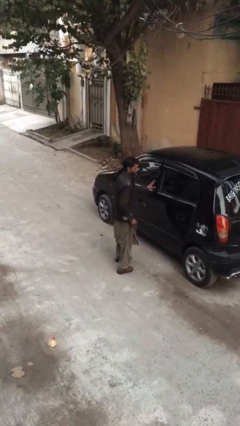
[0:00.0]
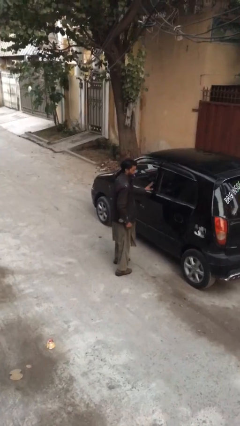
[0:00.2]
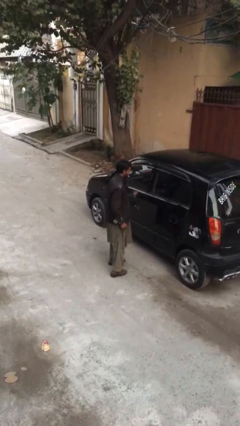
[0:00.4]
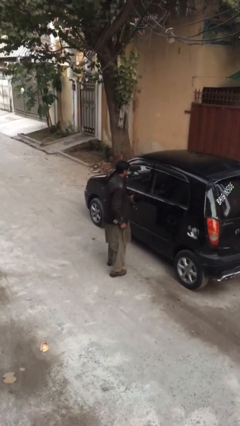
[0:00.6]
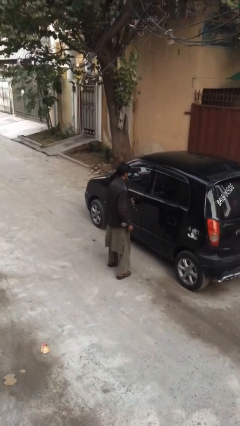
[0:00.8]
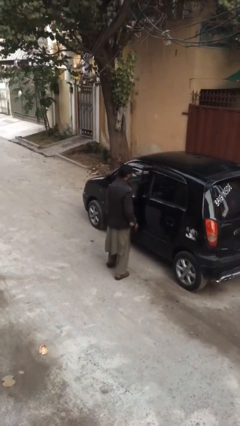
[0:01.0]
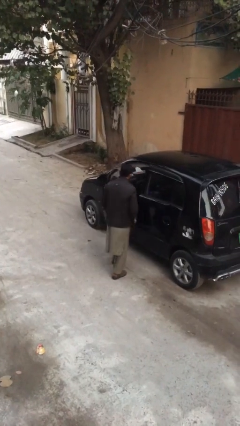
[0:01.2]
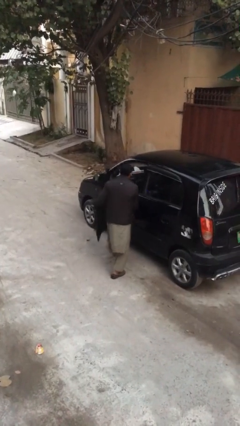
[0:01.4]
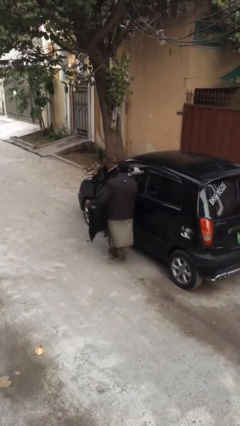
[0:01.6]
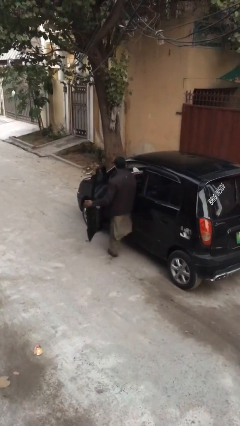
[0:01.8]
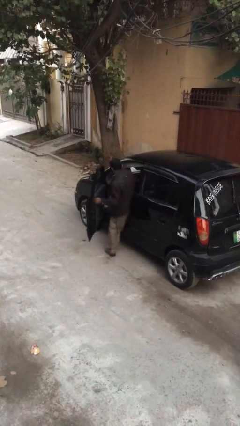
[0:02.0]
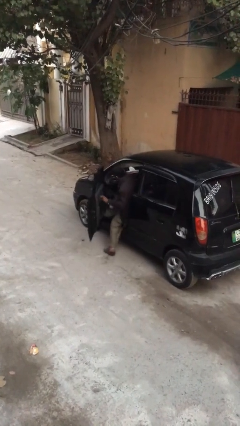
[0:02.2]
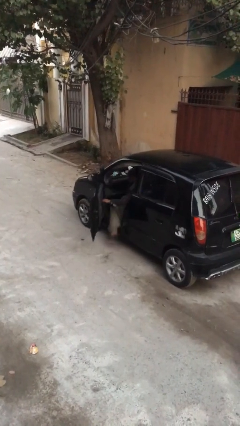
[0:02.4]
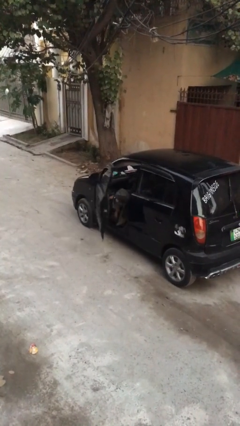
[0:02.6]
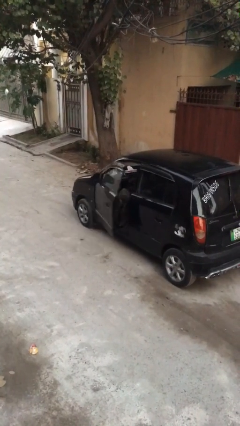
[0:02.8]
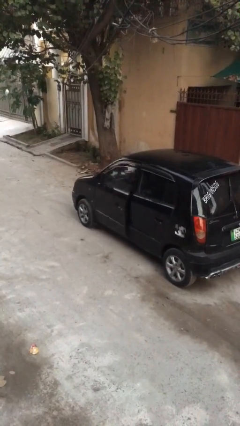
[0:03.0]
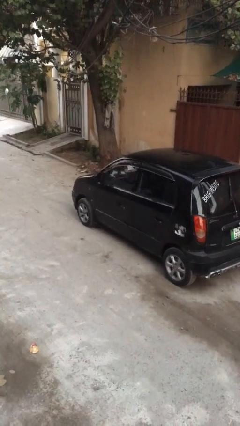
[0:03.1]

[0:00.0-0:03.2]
car picks up person

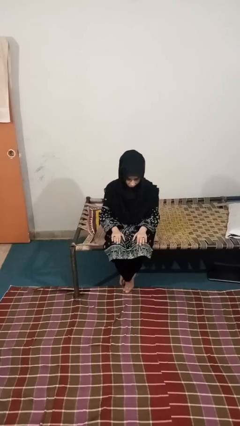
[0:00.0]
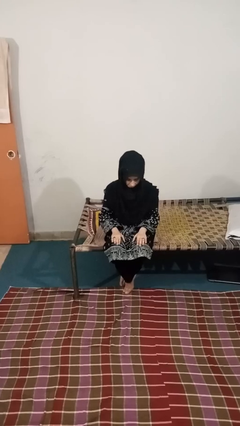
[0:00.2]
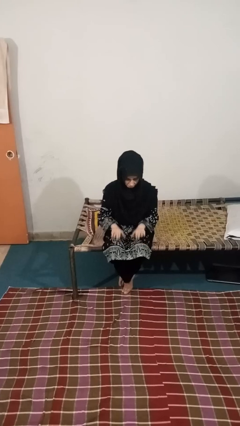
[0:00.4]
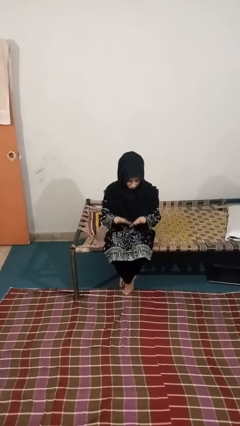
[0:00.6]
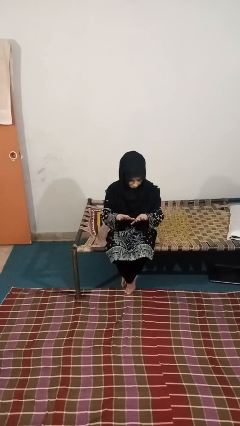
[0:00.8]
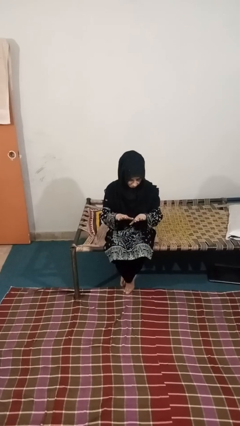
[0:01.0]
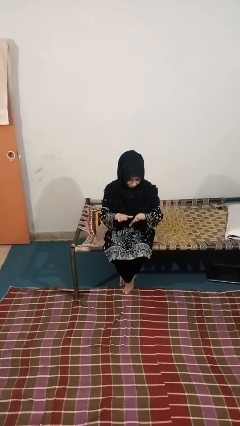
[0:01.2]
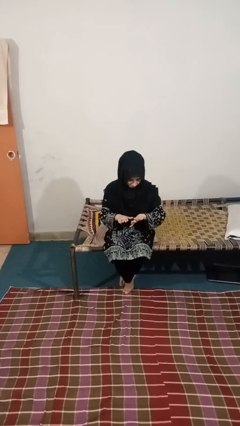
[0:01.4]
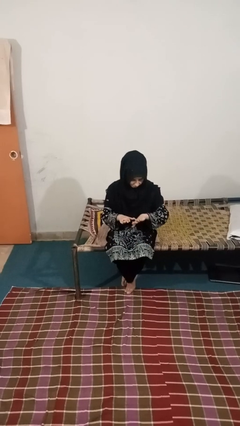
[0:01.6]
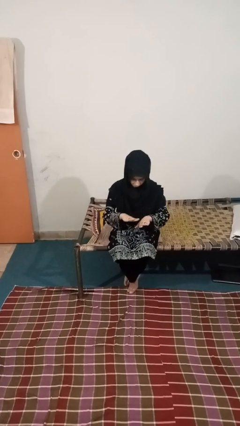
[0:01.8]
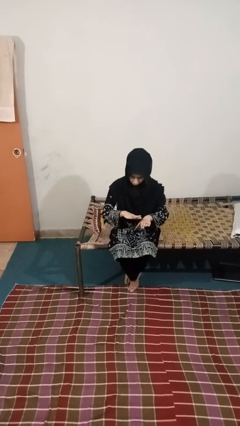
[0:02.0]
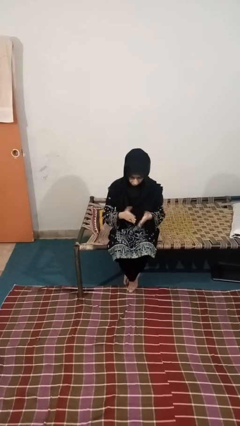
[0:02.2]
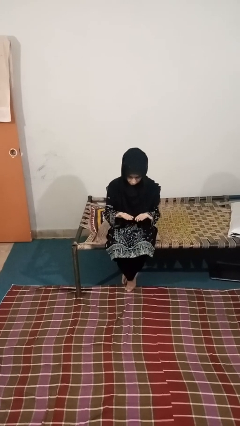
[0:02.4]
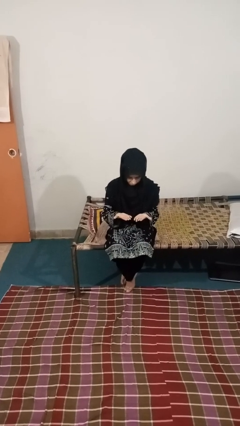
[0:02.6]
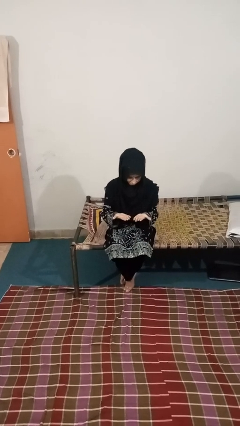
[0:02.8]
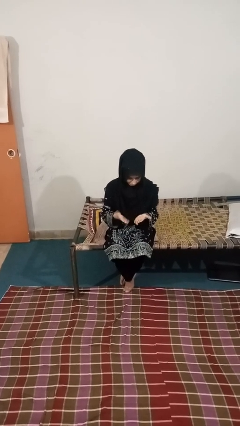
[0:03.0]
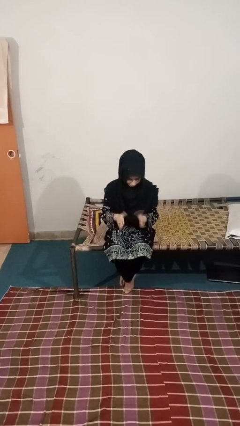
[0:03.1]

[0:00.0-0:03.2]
person looks at hands in lap

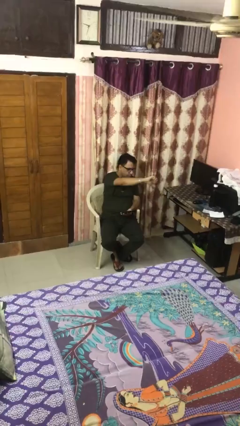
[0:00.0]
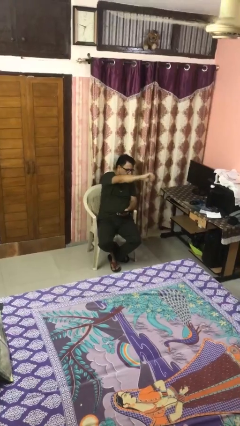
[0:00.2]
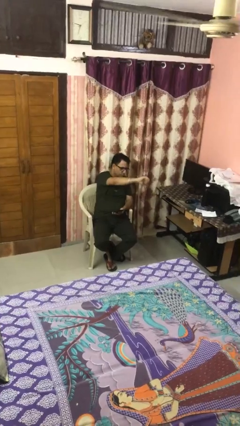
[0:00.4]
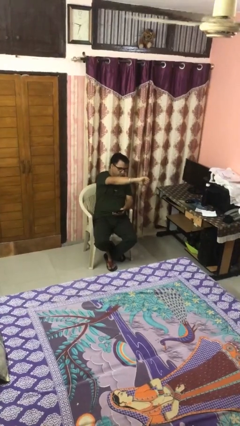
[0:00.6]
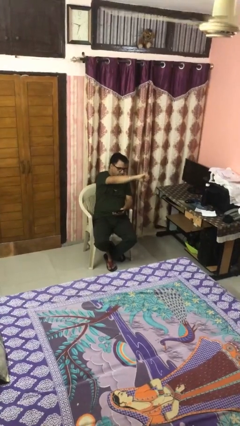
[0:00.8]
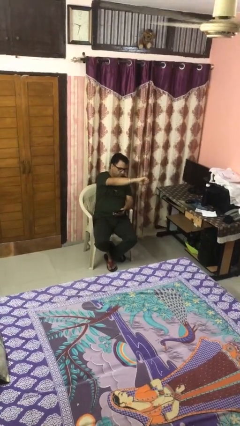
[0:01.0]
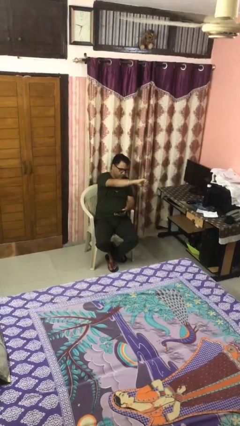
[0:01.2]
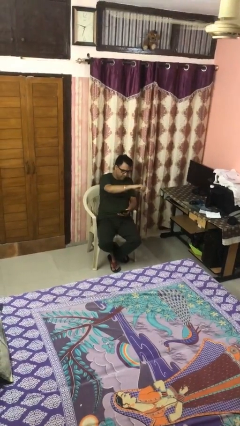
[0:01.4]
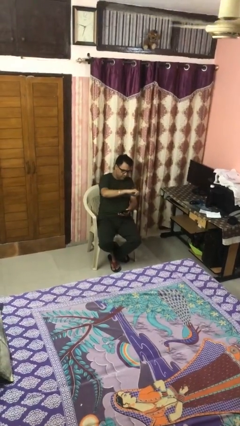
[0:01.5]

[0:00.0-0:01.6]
person gestures thumbs down

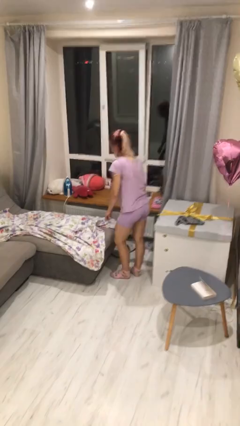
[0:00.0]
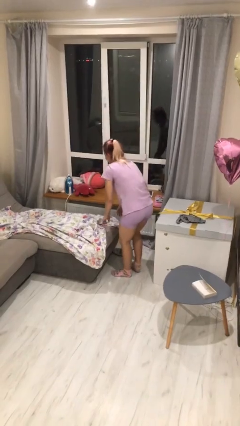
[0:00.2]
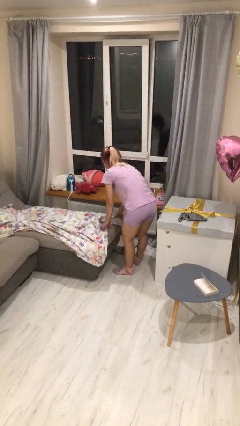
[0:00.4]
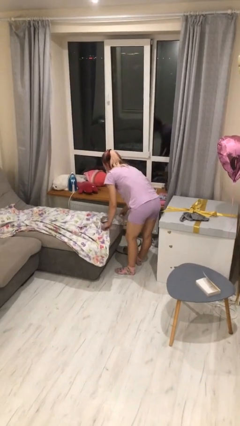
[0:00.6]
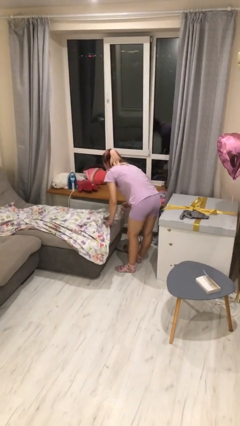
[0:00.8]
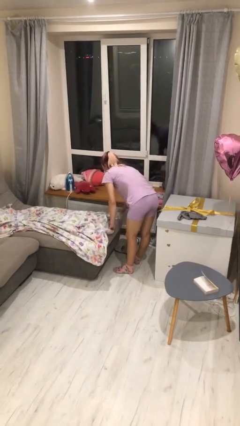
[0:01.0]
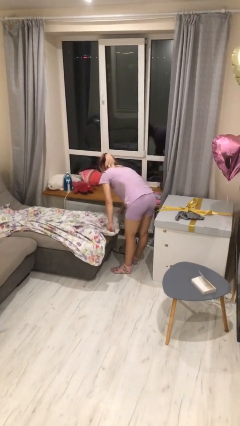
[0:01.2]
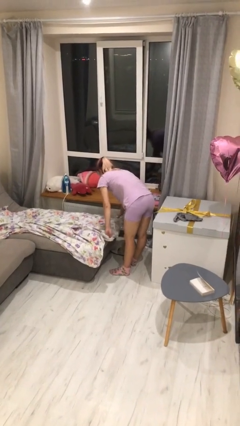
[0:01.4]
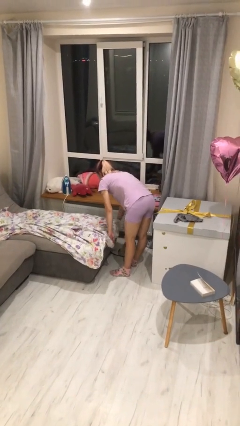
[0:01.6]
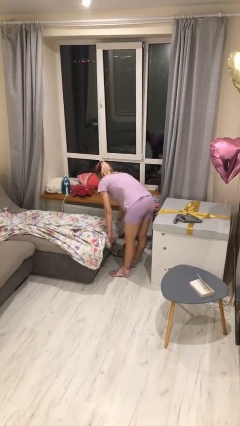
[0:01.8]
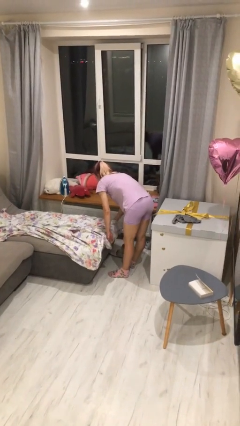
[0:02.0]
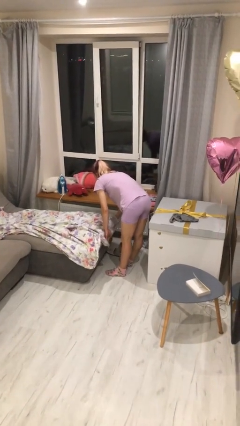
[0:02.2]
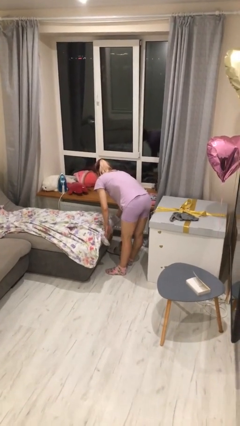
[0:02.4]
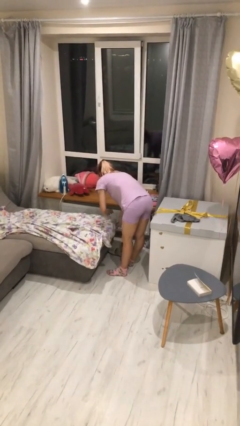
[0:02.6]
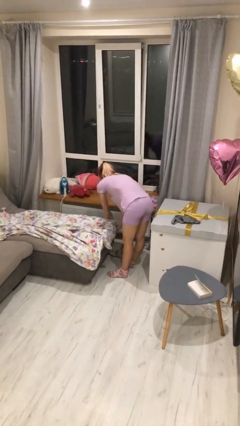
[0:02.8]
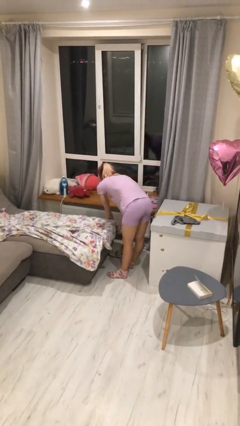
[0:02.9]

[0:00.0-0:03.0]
person makes bed

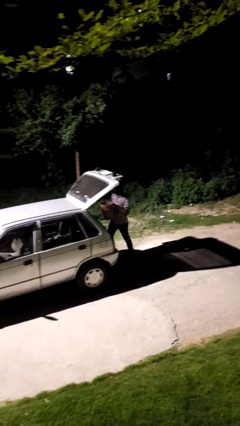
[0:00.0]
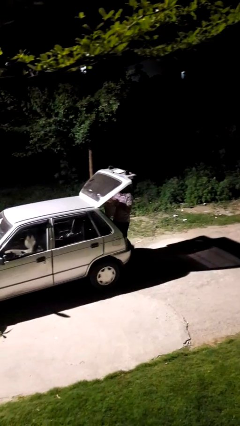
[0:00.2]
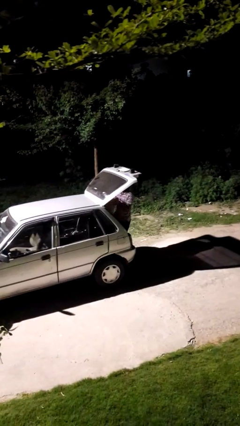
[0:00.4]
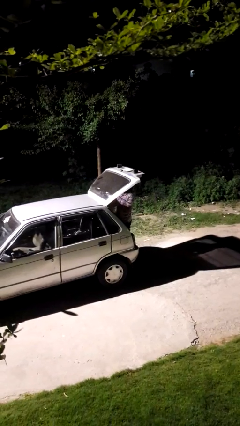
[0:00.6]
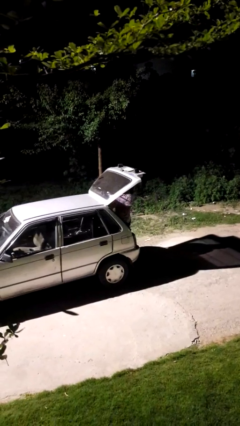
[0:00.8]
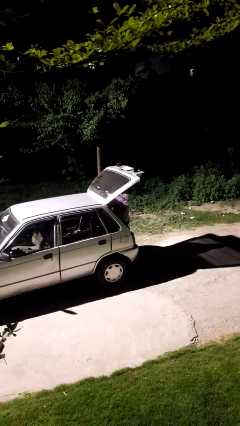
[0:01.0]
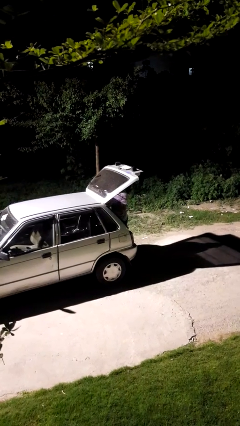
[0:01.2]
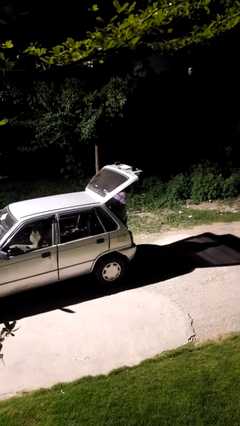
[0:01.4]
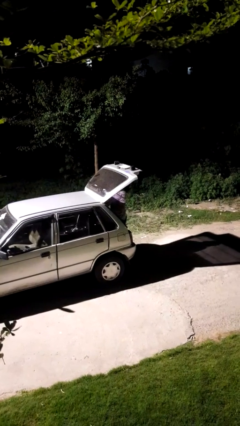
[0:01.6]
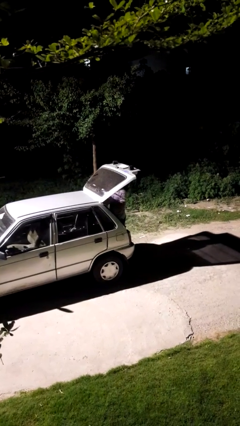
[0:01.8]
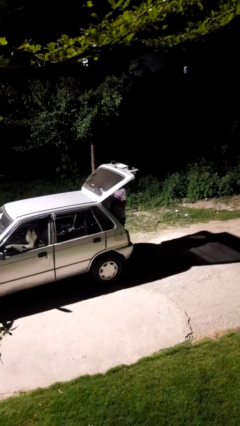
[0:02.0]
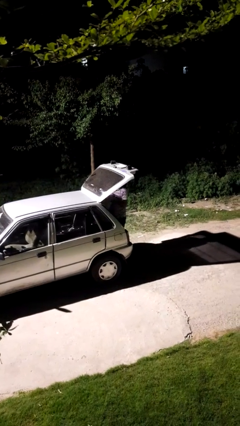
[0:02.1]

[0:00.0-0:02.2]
person loads car

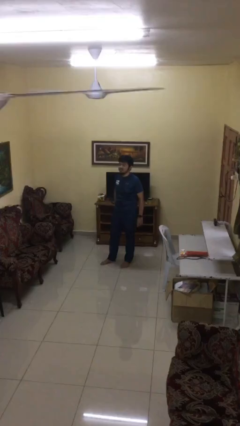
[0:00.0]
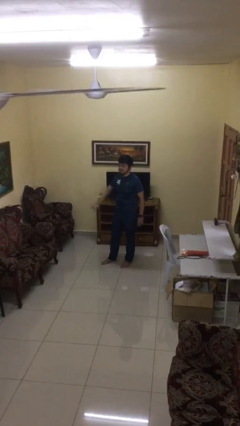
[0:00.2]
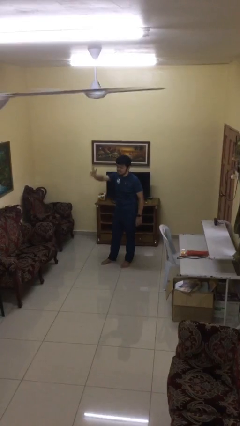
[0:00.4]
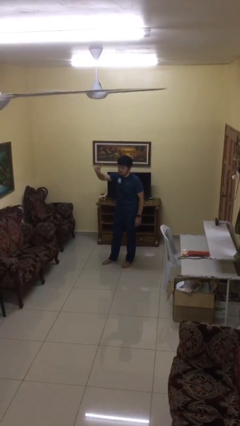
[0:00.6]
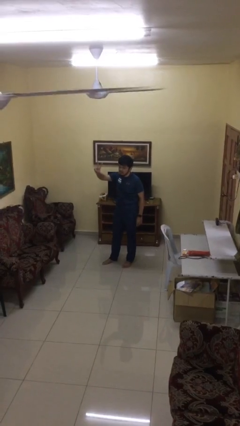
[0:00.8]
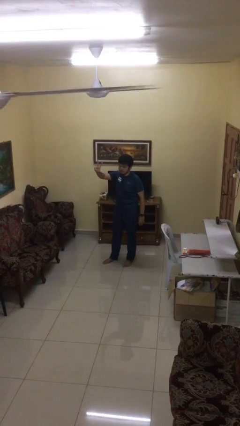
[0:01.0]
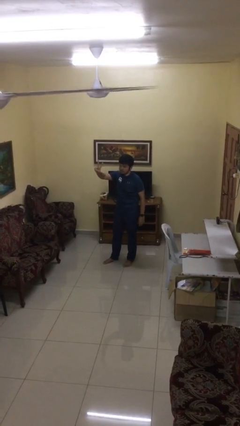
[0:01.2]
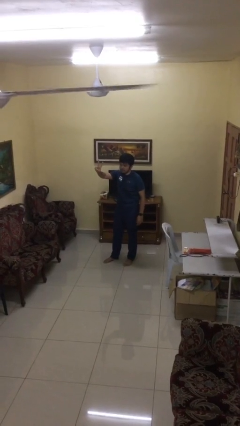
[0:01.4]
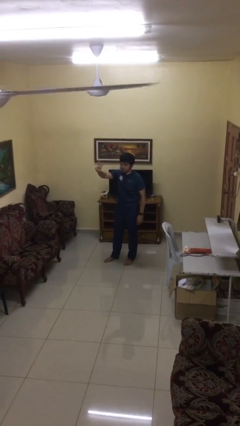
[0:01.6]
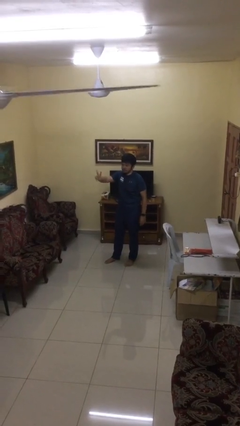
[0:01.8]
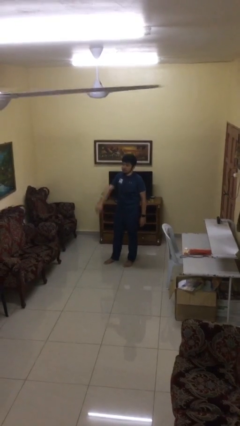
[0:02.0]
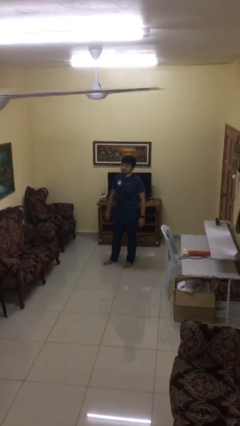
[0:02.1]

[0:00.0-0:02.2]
person gestures peace

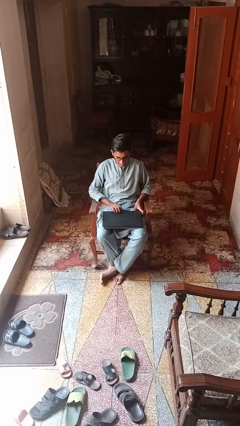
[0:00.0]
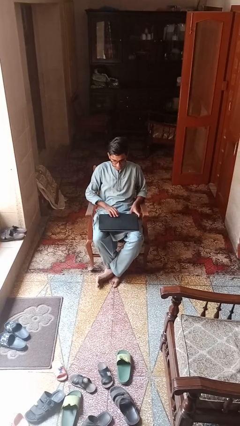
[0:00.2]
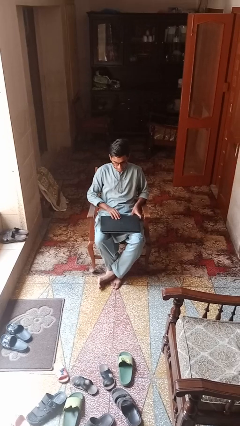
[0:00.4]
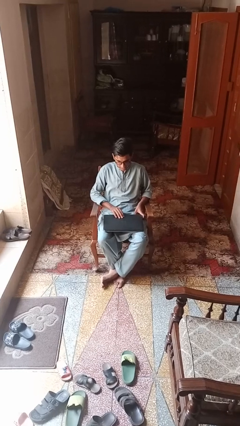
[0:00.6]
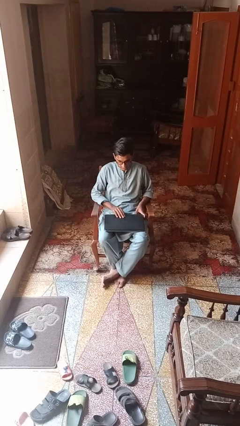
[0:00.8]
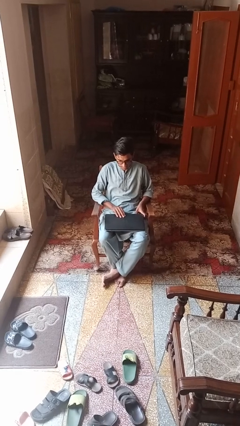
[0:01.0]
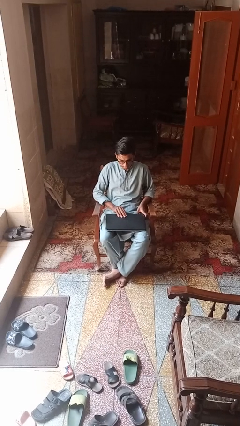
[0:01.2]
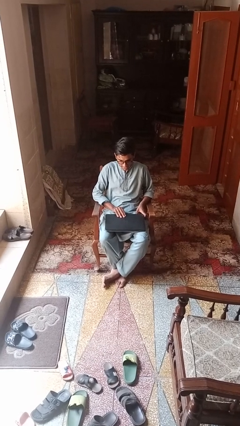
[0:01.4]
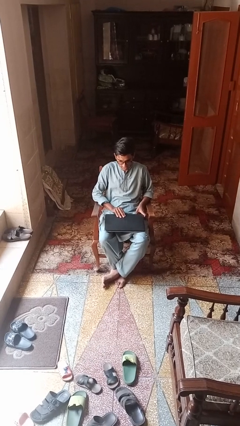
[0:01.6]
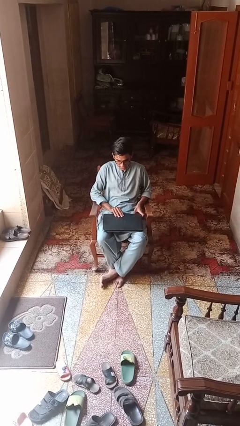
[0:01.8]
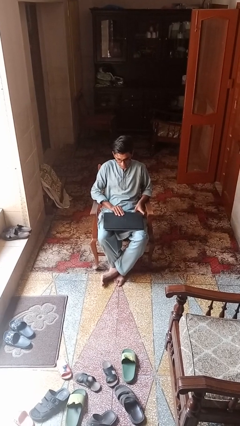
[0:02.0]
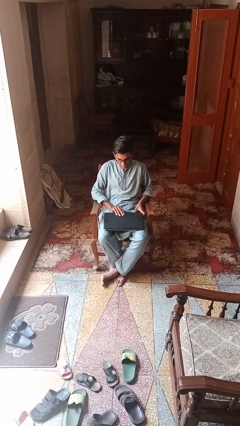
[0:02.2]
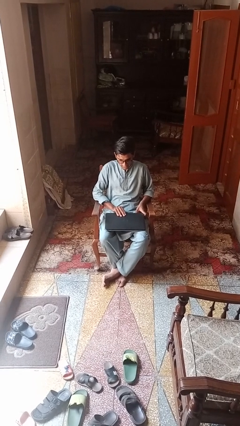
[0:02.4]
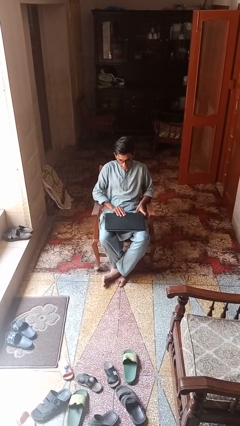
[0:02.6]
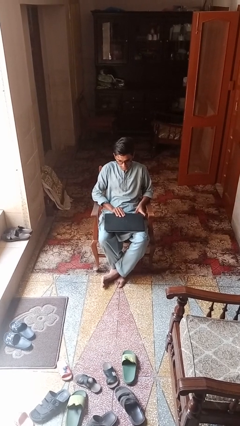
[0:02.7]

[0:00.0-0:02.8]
person closes laptop
